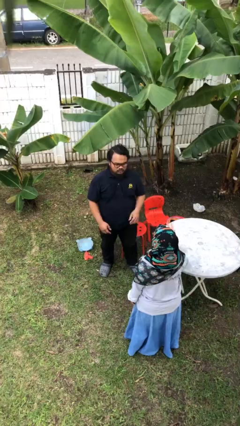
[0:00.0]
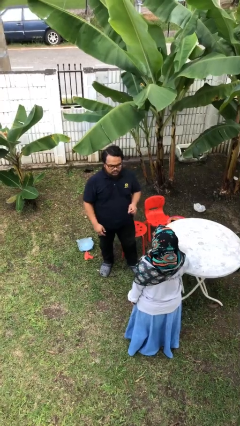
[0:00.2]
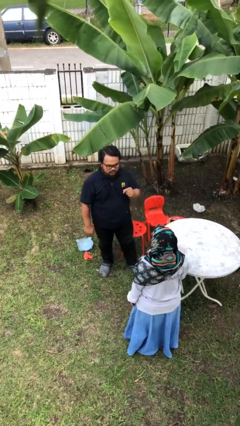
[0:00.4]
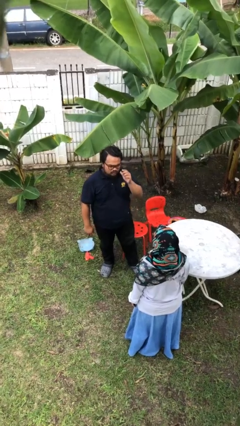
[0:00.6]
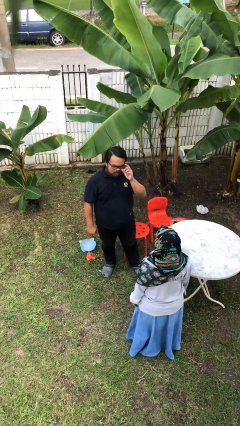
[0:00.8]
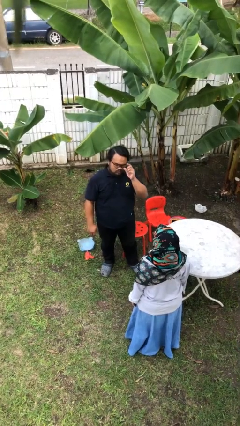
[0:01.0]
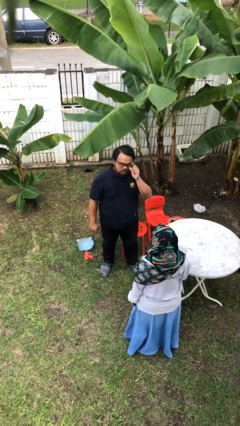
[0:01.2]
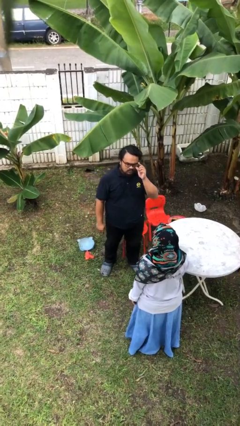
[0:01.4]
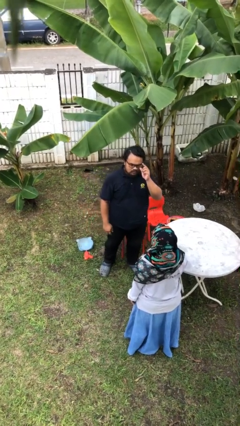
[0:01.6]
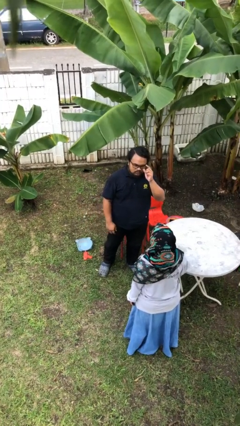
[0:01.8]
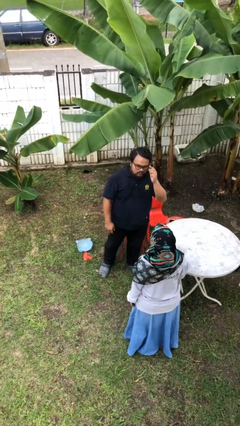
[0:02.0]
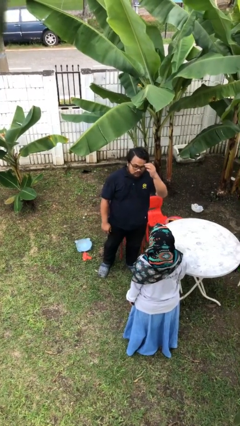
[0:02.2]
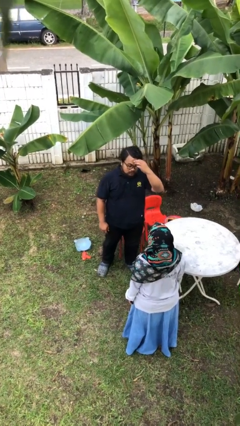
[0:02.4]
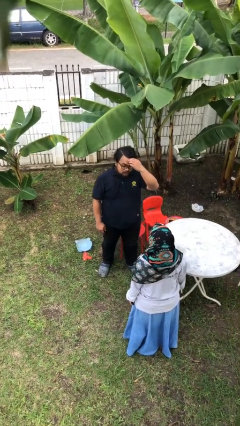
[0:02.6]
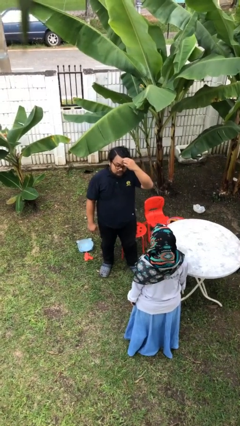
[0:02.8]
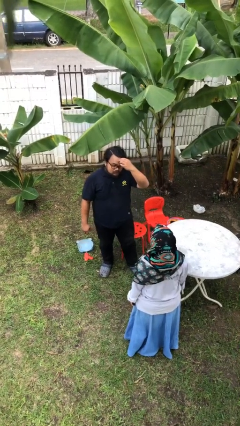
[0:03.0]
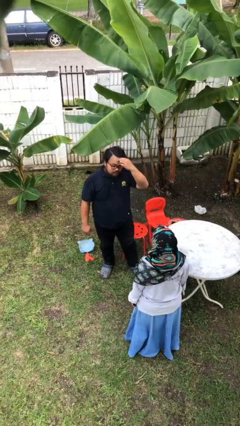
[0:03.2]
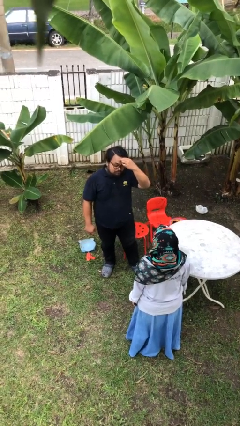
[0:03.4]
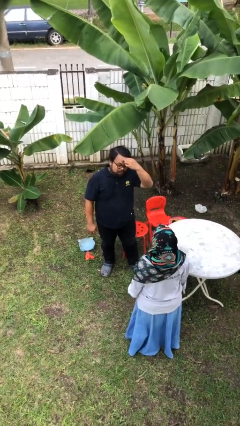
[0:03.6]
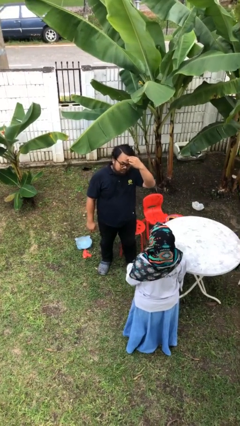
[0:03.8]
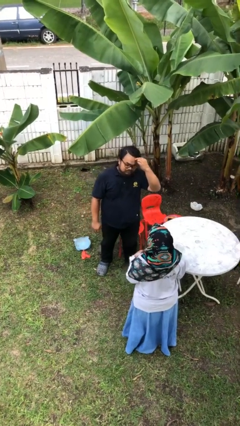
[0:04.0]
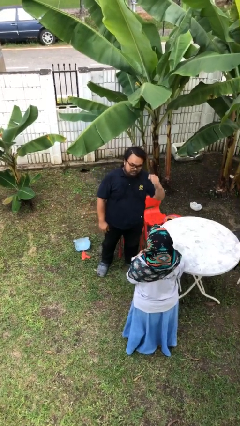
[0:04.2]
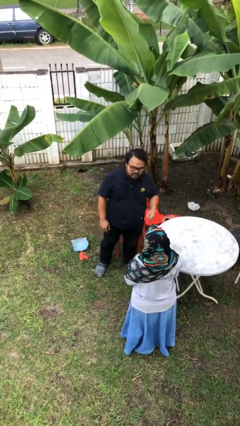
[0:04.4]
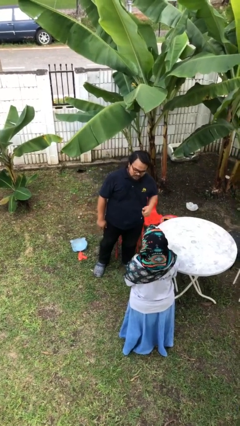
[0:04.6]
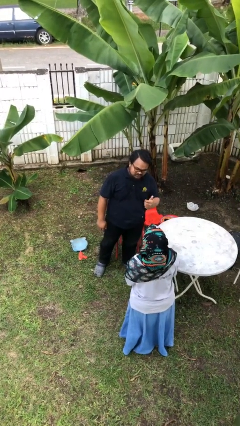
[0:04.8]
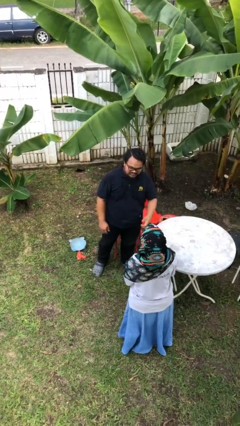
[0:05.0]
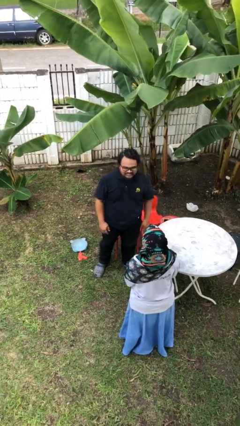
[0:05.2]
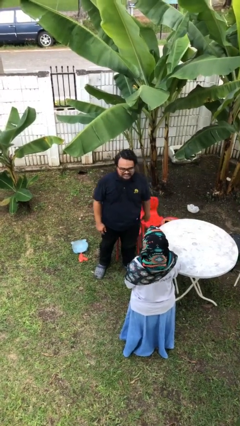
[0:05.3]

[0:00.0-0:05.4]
person talks to person

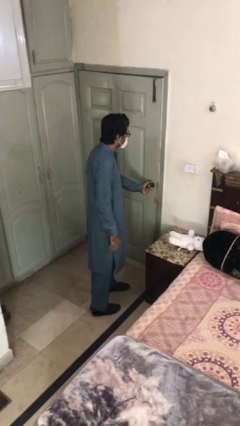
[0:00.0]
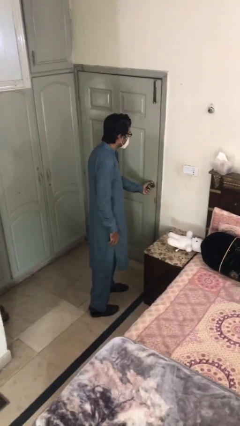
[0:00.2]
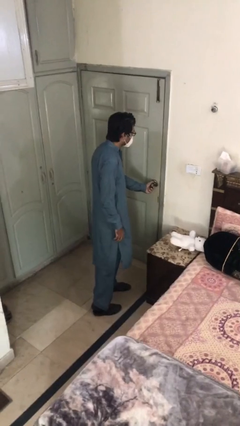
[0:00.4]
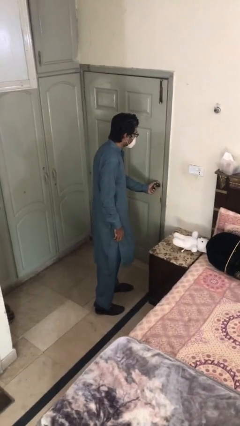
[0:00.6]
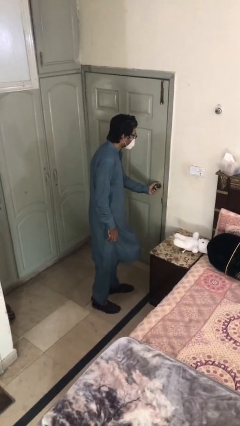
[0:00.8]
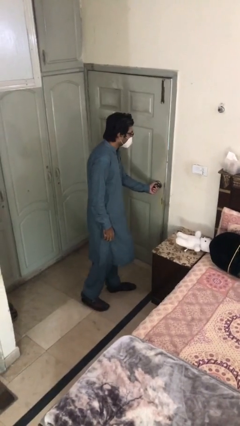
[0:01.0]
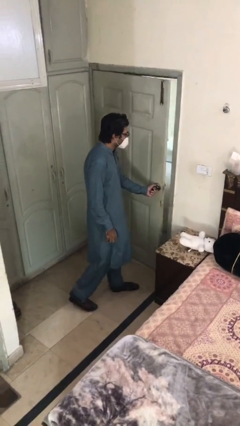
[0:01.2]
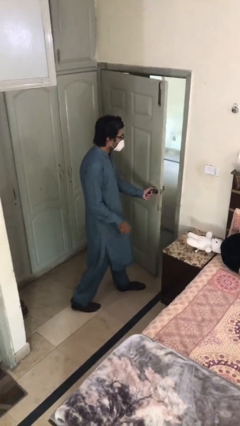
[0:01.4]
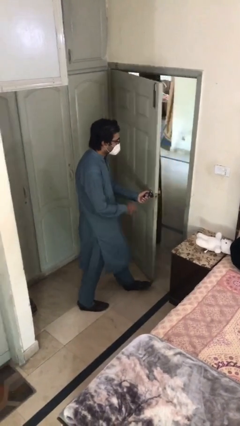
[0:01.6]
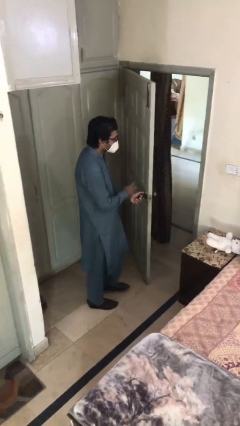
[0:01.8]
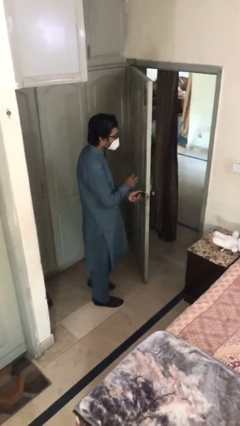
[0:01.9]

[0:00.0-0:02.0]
person opens facility door

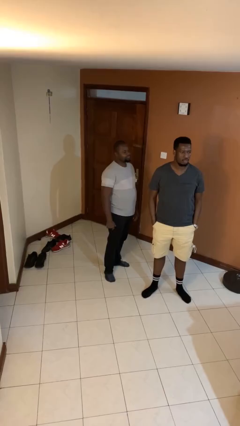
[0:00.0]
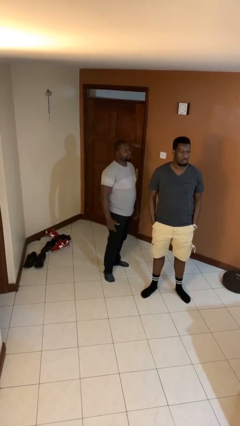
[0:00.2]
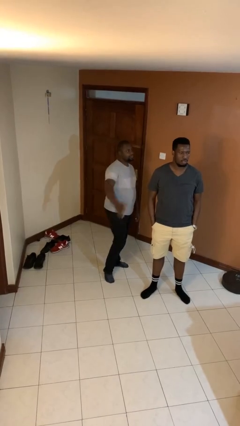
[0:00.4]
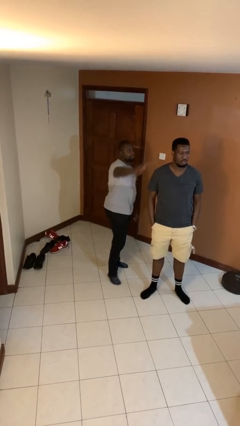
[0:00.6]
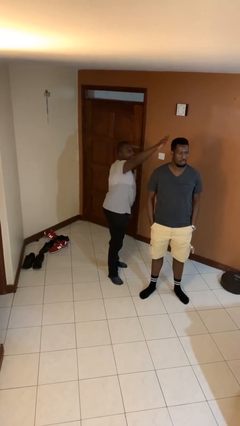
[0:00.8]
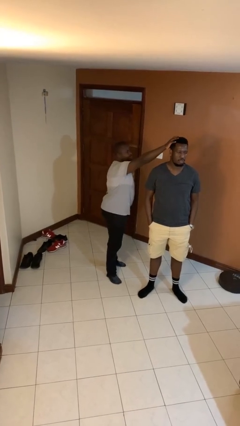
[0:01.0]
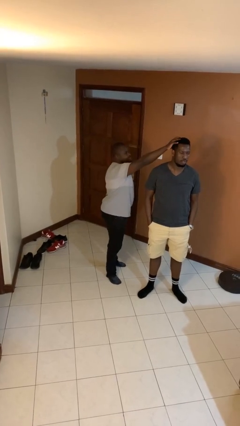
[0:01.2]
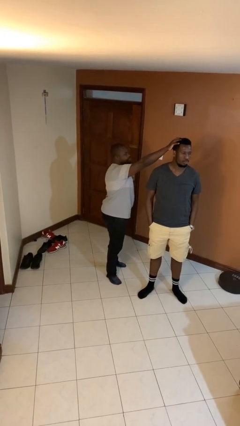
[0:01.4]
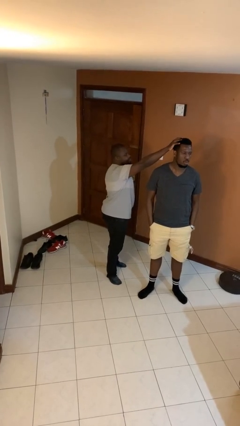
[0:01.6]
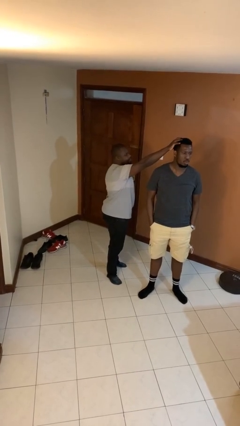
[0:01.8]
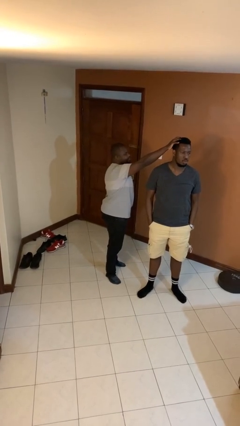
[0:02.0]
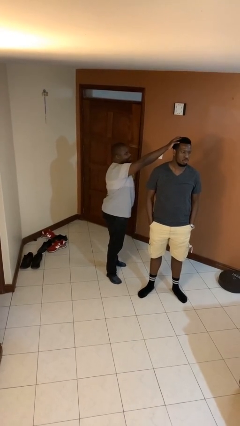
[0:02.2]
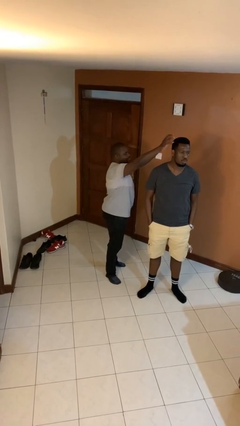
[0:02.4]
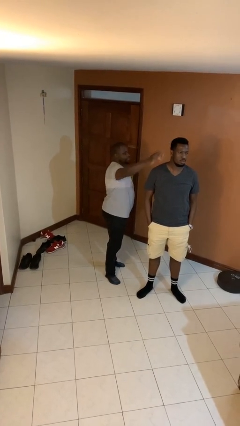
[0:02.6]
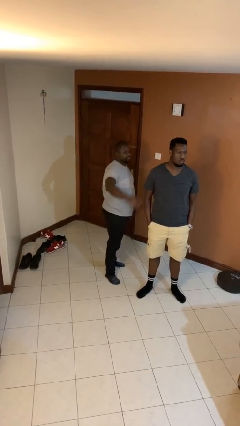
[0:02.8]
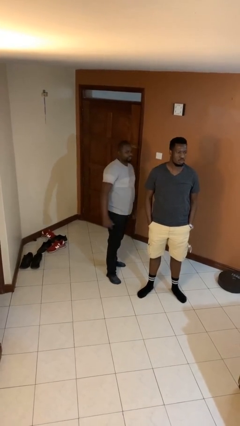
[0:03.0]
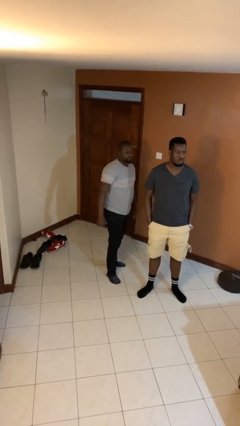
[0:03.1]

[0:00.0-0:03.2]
person grabs person by hair

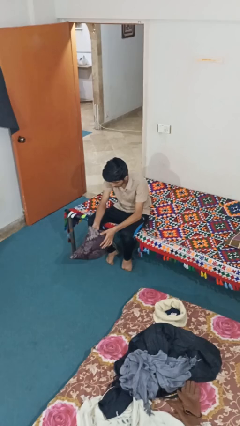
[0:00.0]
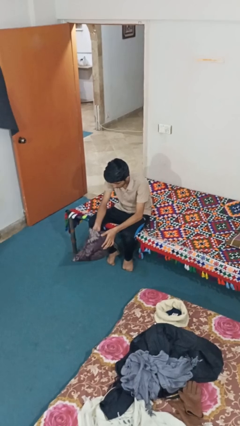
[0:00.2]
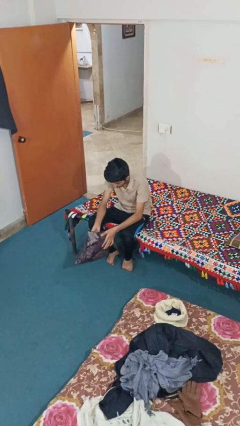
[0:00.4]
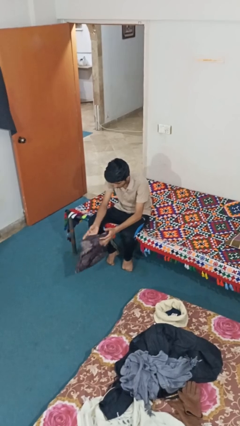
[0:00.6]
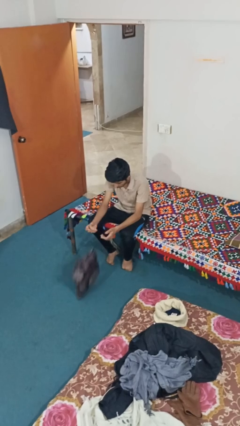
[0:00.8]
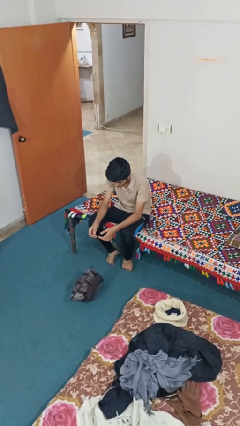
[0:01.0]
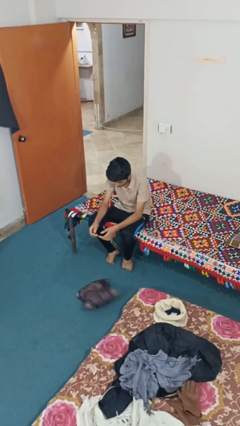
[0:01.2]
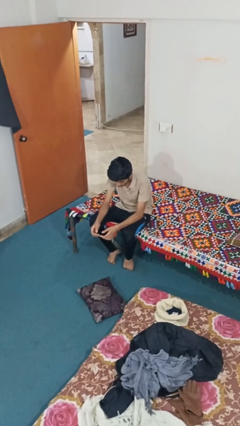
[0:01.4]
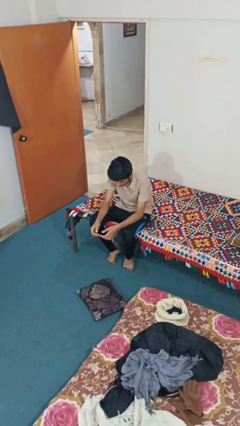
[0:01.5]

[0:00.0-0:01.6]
person drops object

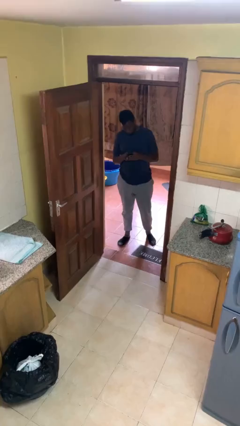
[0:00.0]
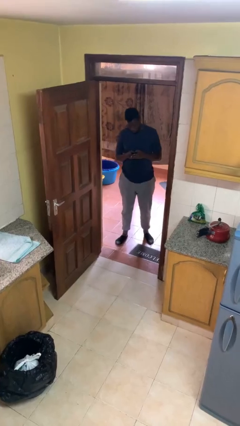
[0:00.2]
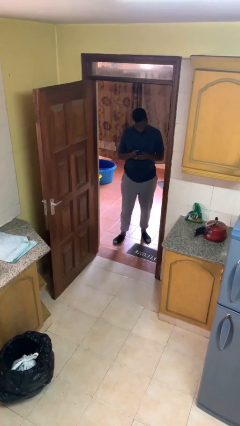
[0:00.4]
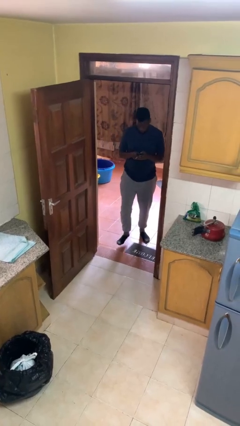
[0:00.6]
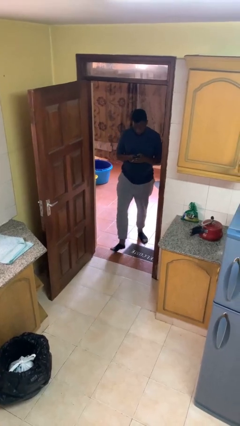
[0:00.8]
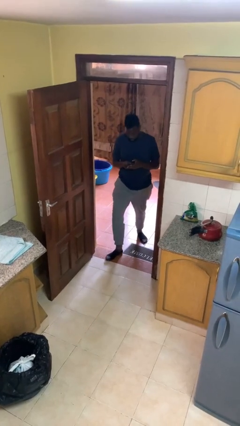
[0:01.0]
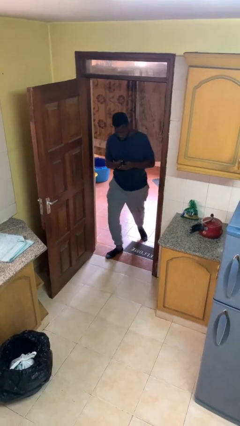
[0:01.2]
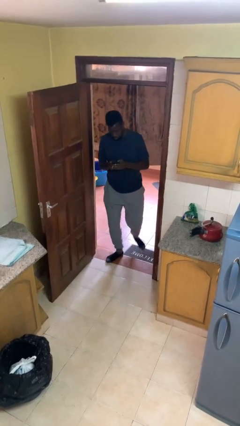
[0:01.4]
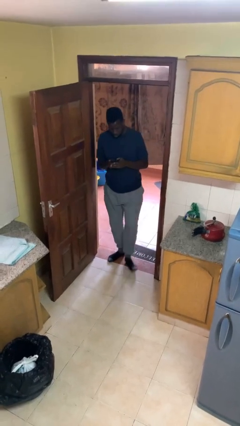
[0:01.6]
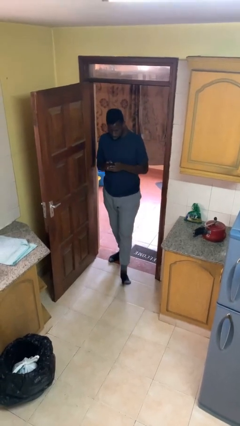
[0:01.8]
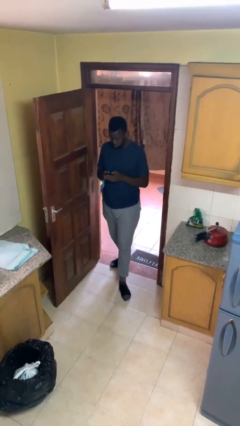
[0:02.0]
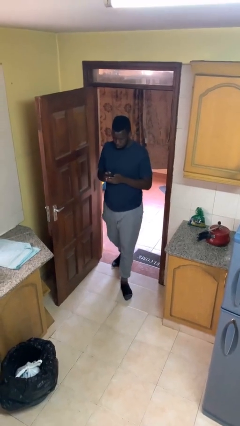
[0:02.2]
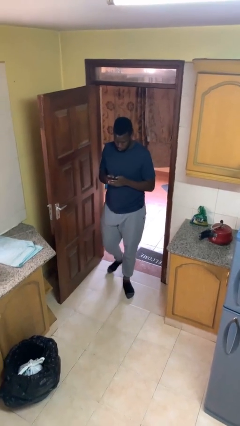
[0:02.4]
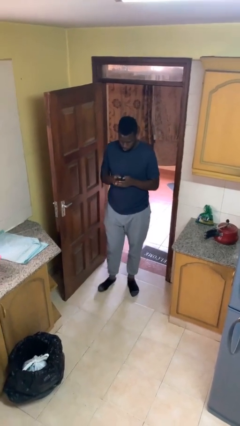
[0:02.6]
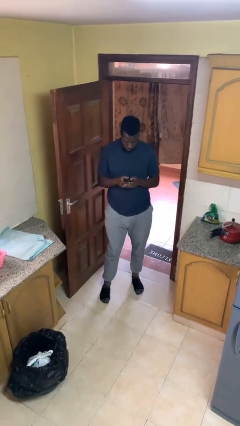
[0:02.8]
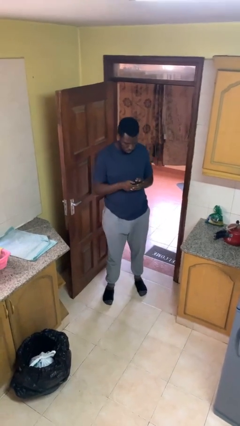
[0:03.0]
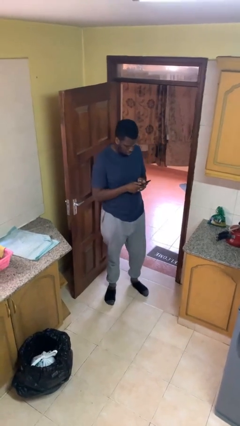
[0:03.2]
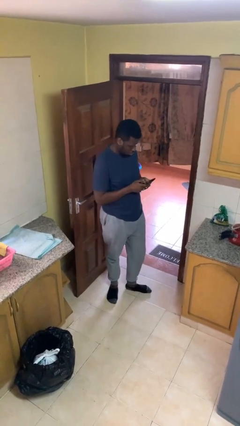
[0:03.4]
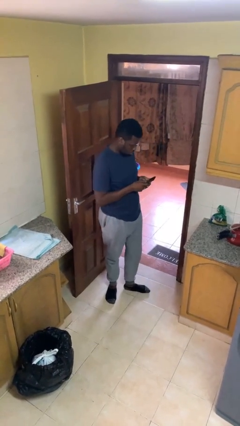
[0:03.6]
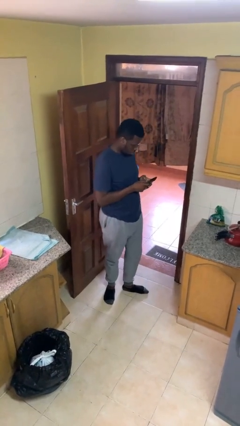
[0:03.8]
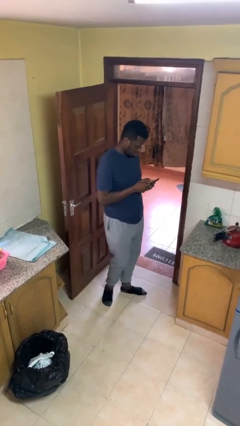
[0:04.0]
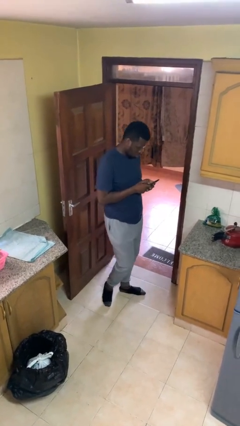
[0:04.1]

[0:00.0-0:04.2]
person enters scene through structure

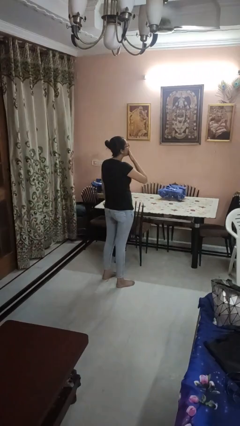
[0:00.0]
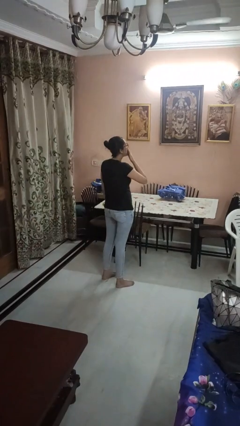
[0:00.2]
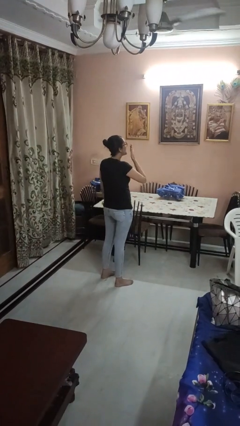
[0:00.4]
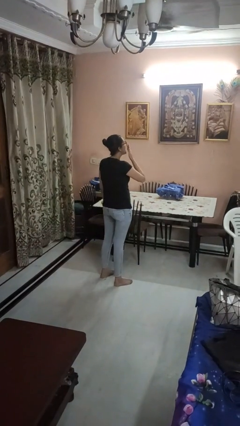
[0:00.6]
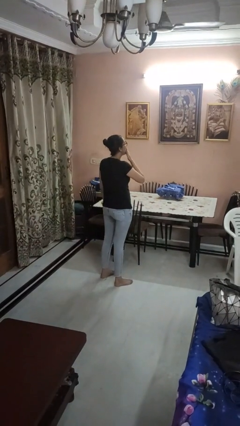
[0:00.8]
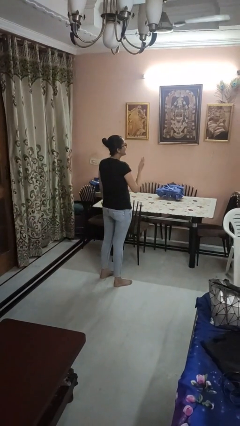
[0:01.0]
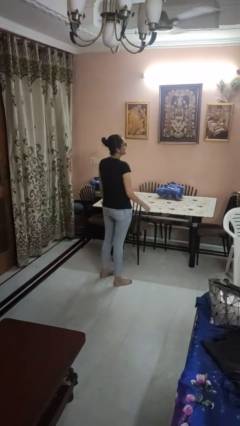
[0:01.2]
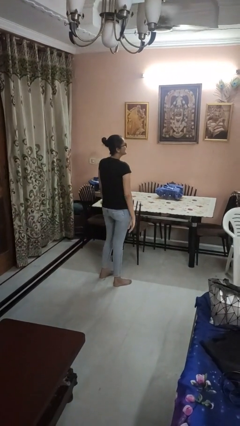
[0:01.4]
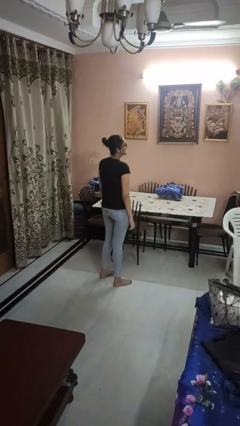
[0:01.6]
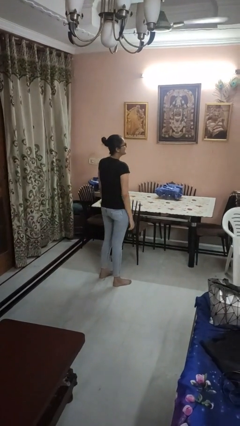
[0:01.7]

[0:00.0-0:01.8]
person yawns
